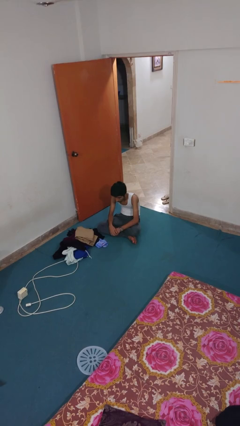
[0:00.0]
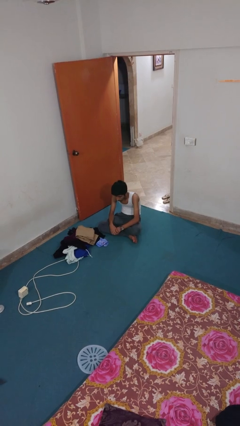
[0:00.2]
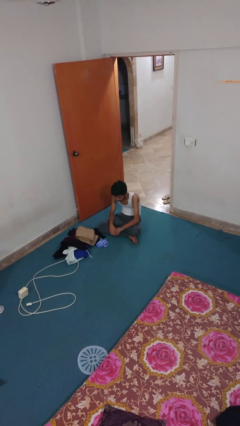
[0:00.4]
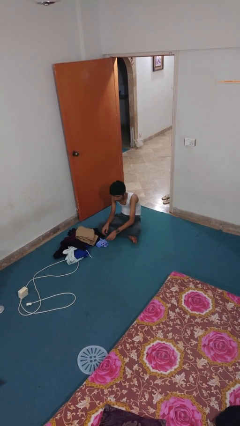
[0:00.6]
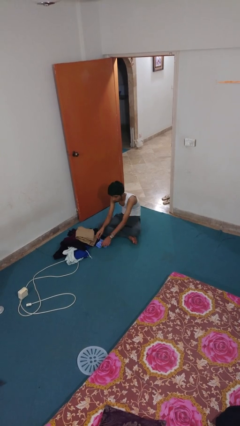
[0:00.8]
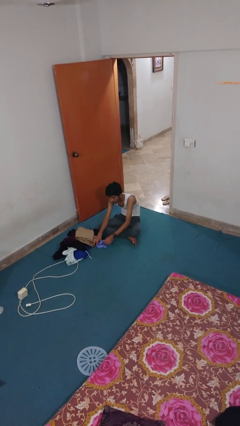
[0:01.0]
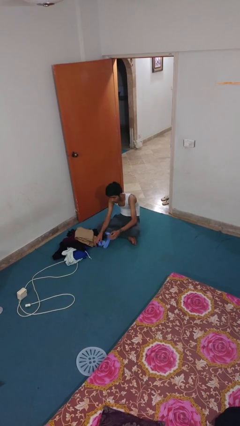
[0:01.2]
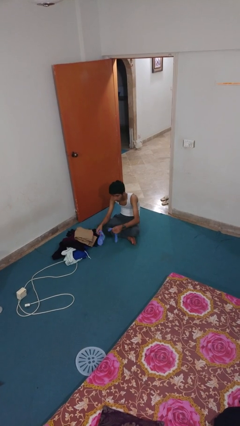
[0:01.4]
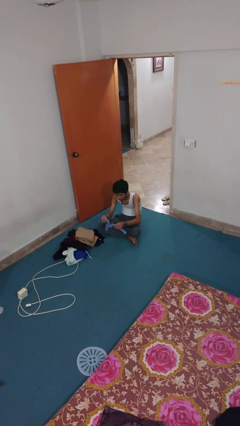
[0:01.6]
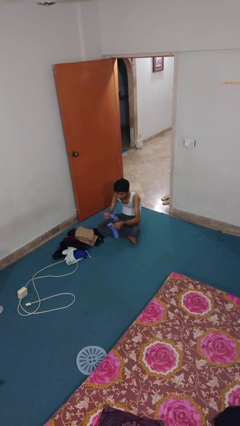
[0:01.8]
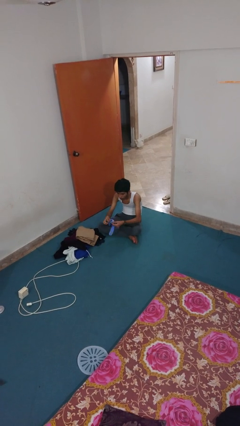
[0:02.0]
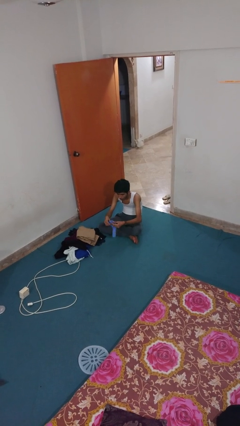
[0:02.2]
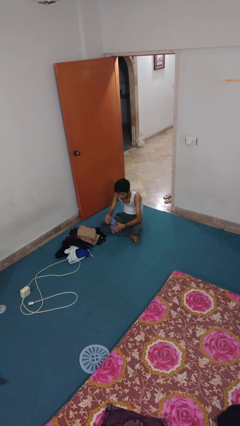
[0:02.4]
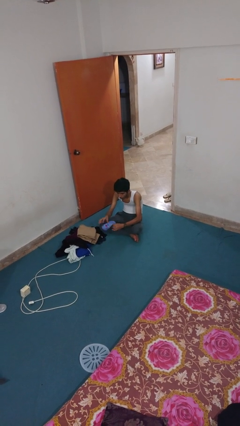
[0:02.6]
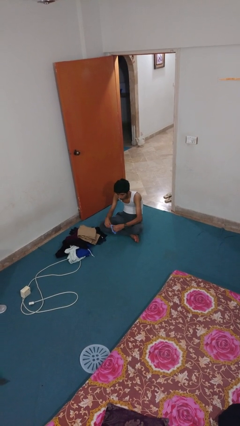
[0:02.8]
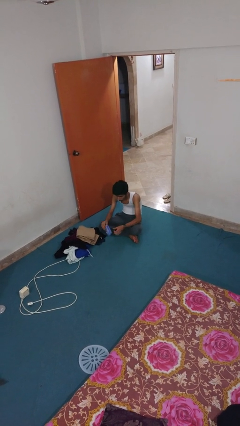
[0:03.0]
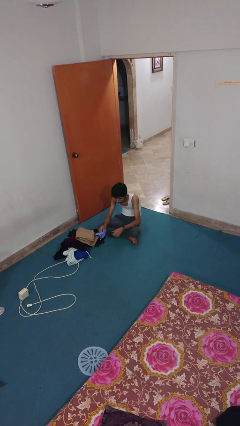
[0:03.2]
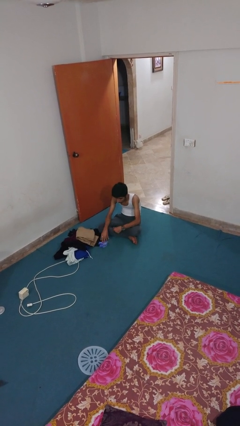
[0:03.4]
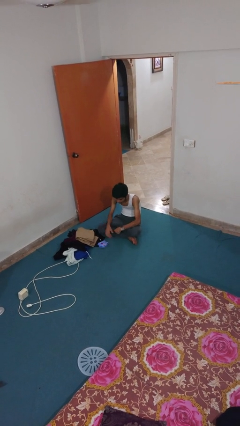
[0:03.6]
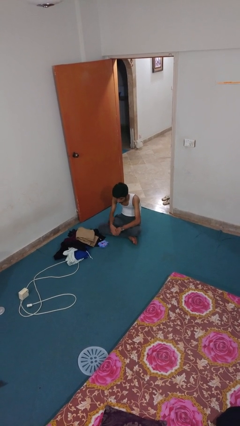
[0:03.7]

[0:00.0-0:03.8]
person folds socks

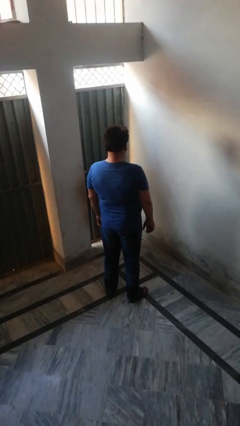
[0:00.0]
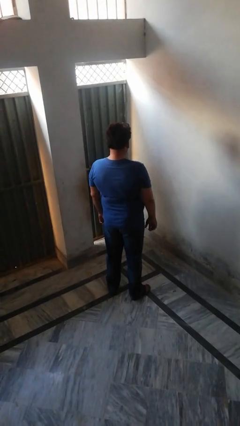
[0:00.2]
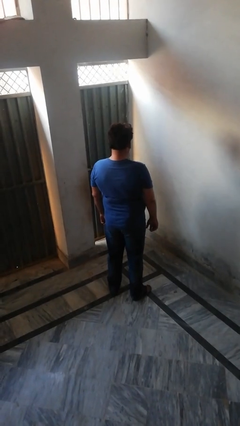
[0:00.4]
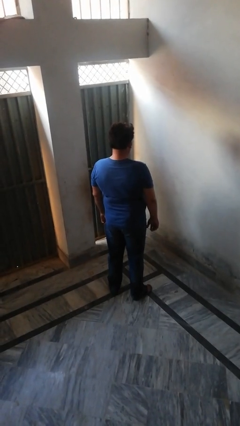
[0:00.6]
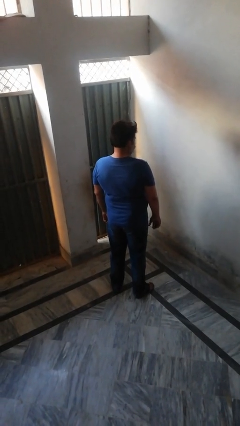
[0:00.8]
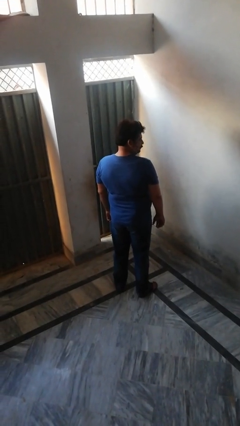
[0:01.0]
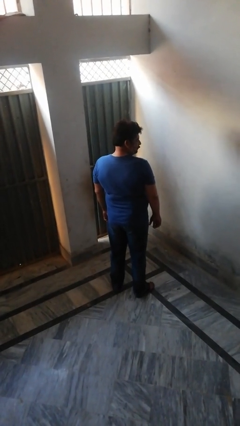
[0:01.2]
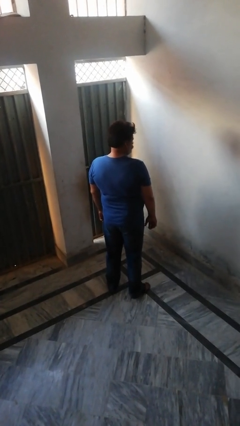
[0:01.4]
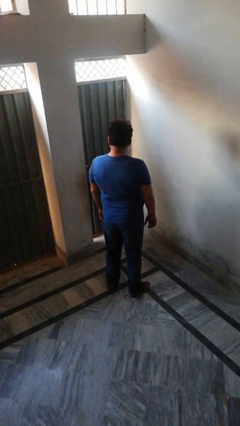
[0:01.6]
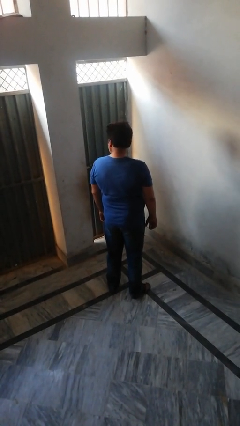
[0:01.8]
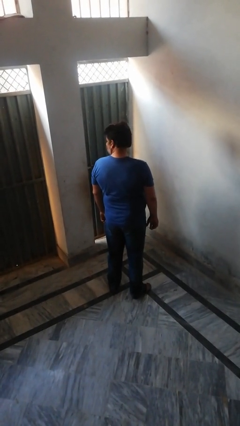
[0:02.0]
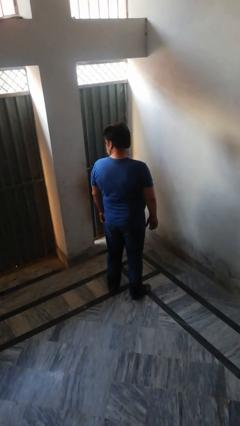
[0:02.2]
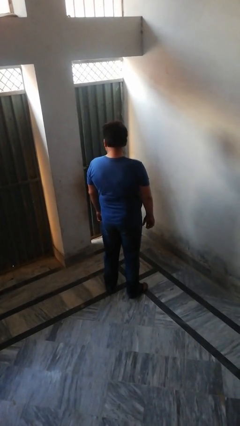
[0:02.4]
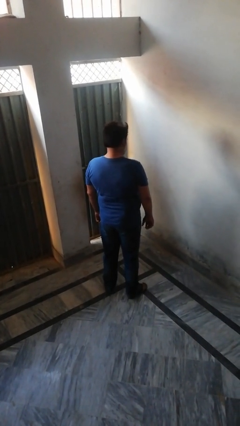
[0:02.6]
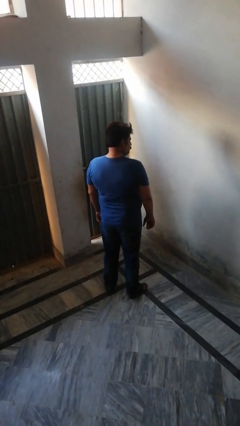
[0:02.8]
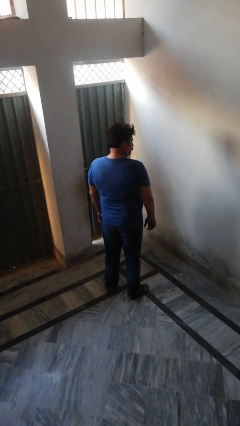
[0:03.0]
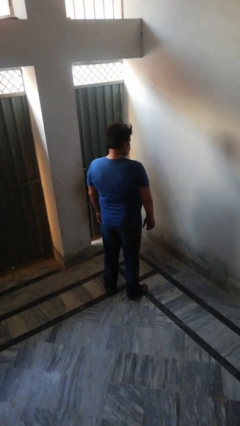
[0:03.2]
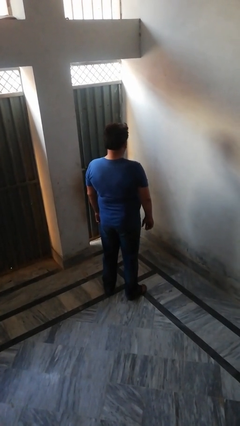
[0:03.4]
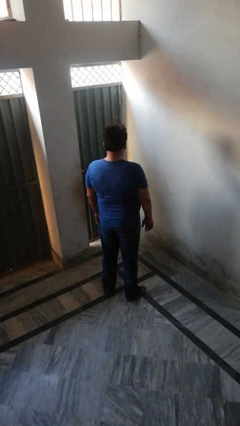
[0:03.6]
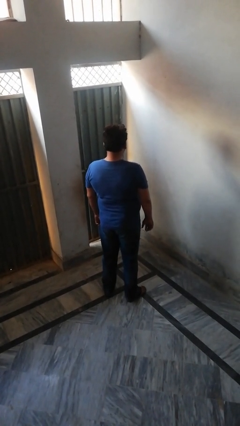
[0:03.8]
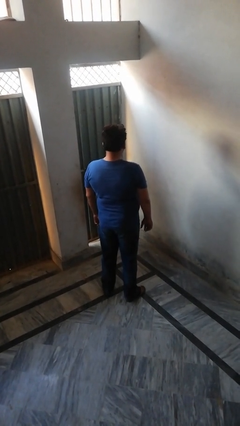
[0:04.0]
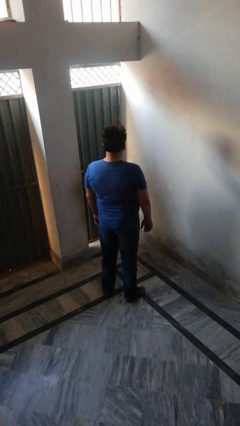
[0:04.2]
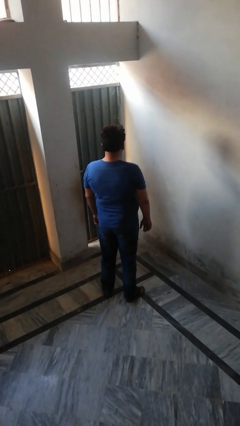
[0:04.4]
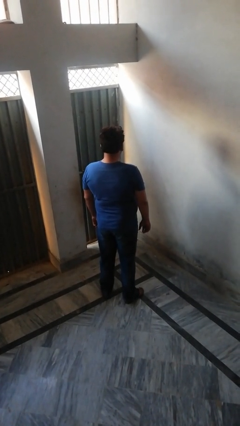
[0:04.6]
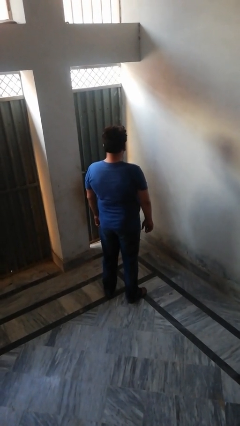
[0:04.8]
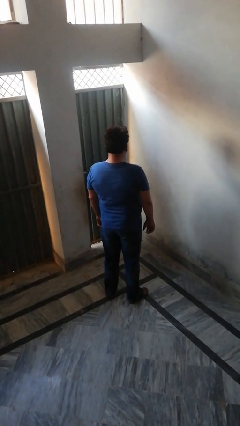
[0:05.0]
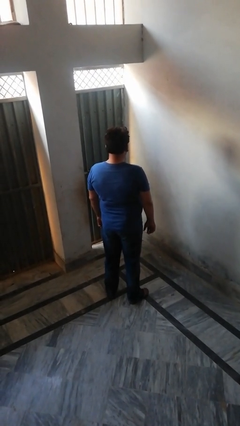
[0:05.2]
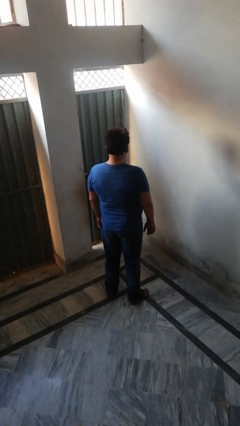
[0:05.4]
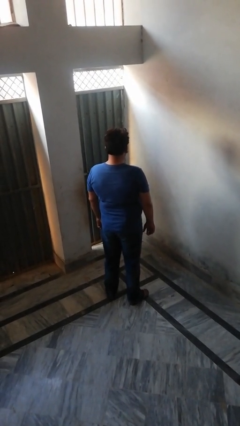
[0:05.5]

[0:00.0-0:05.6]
person shakes head

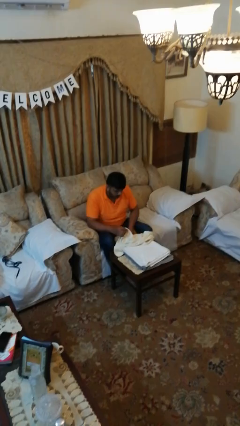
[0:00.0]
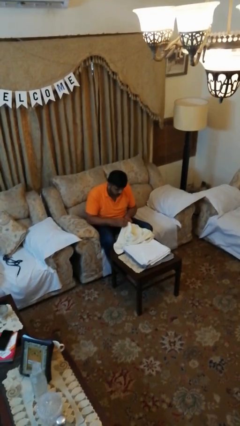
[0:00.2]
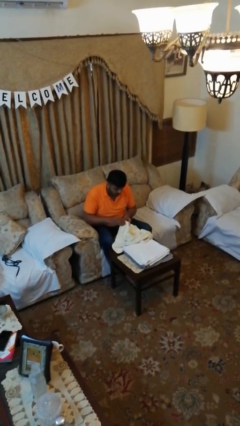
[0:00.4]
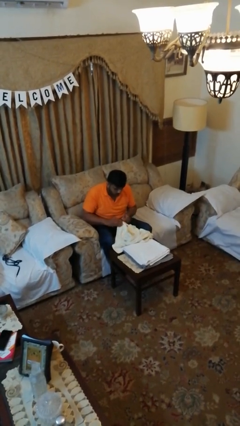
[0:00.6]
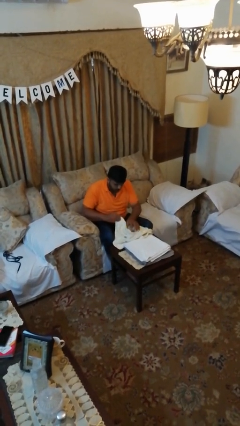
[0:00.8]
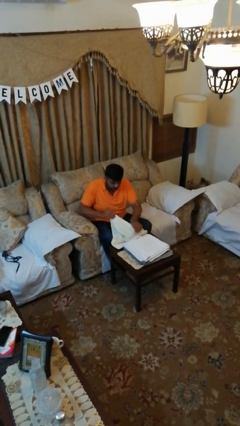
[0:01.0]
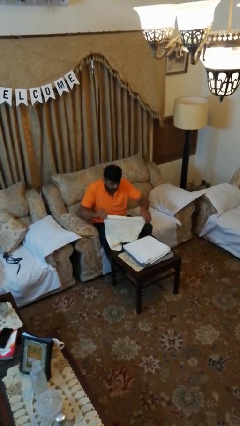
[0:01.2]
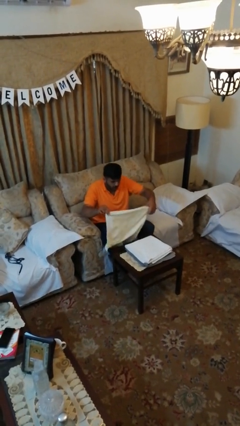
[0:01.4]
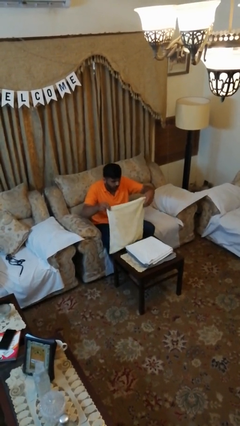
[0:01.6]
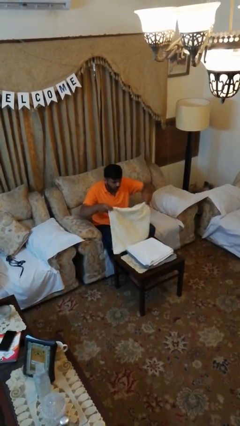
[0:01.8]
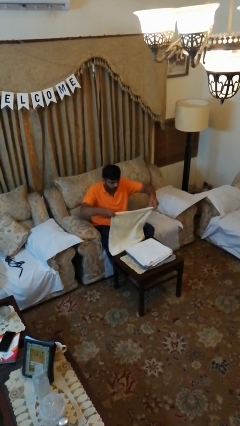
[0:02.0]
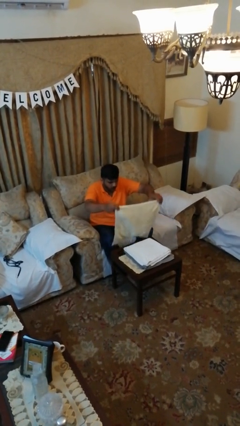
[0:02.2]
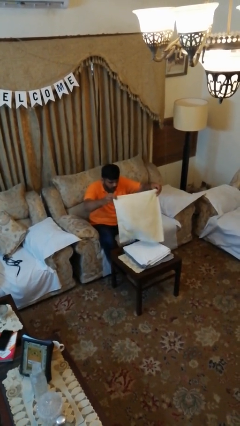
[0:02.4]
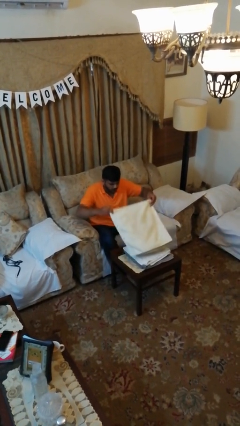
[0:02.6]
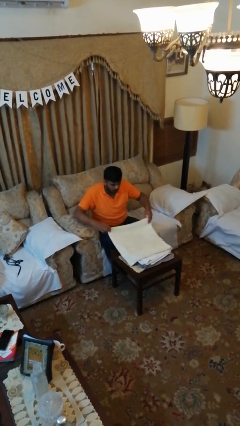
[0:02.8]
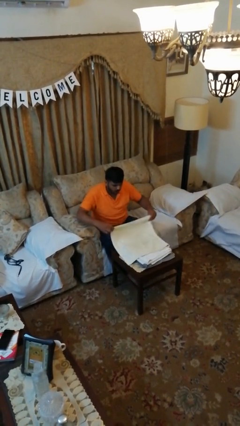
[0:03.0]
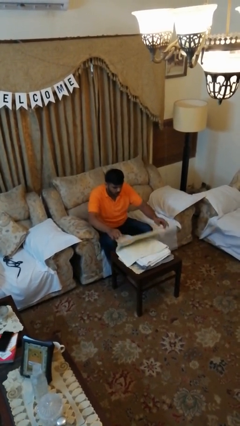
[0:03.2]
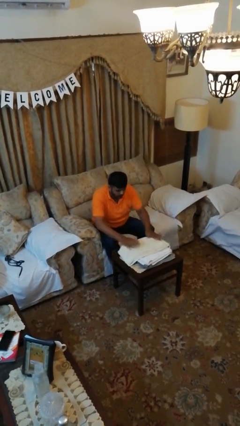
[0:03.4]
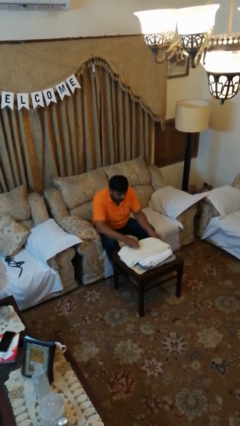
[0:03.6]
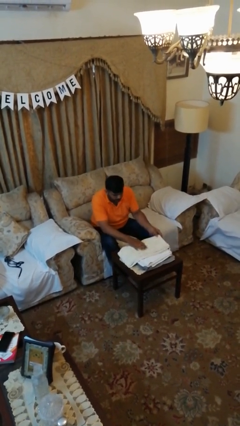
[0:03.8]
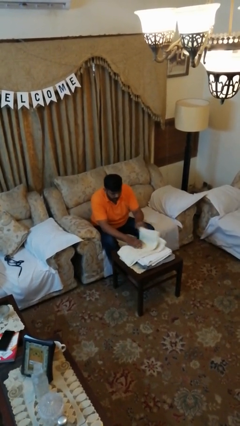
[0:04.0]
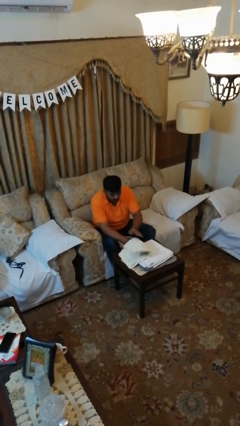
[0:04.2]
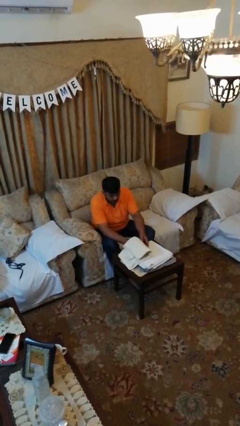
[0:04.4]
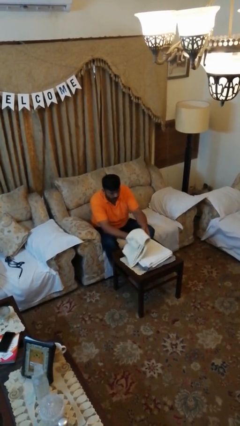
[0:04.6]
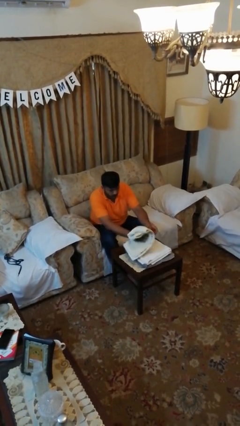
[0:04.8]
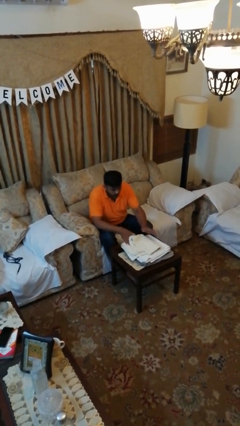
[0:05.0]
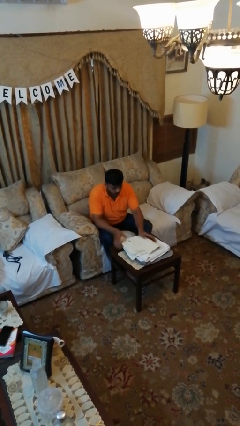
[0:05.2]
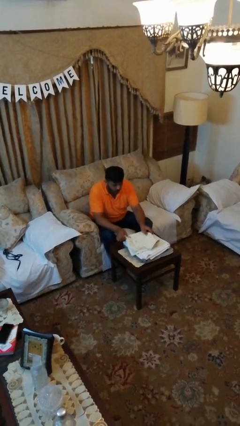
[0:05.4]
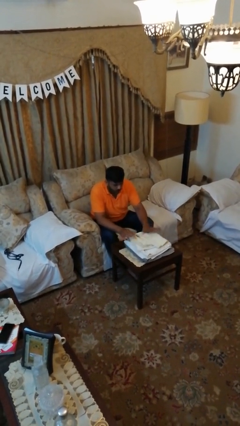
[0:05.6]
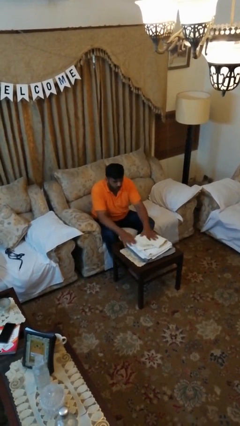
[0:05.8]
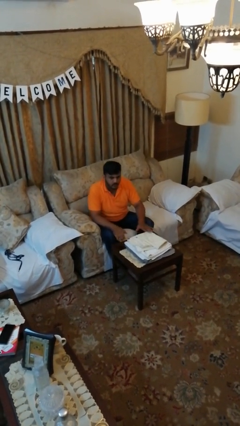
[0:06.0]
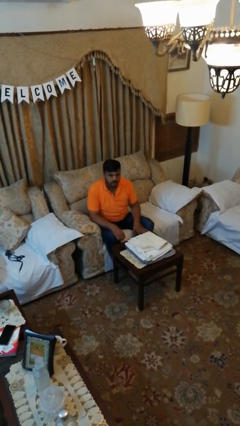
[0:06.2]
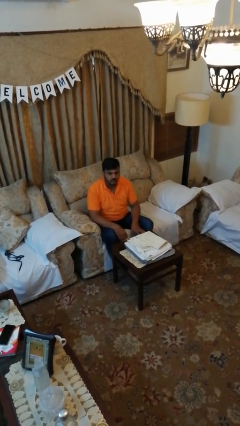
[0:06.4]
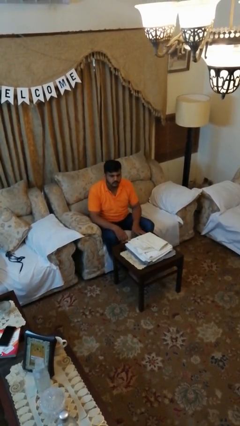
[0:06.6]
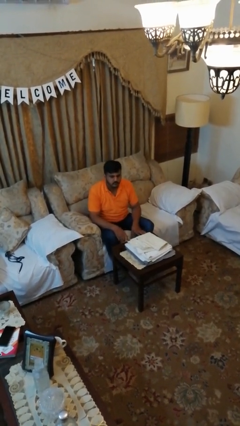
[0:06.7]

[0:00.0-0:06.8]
person folds towel

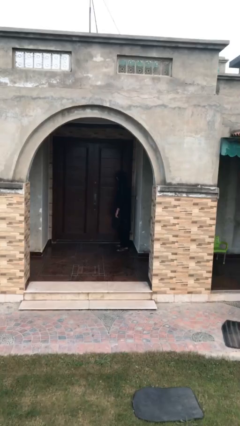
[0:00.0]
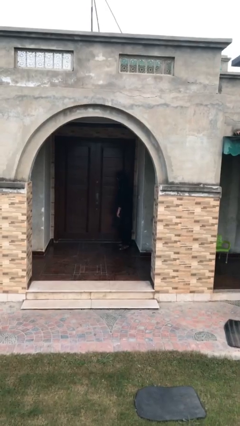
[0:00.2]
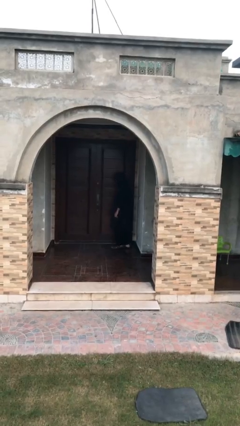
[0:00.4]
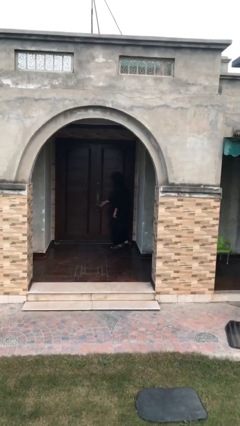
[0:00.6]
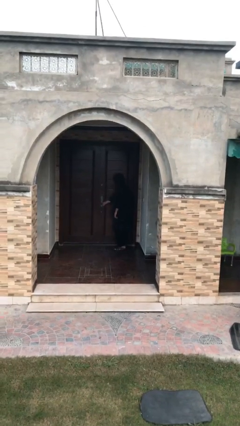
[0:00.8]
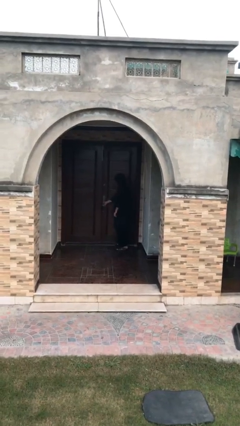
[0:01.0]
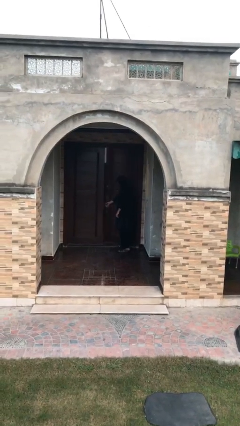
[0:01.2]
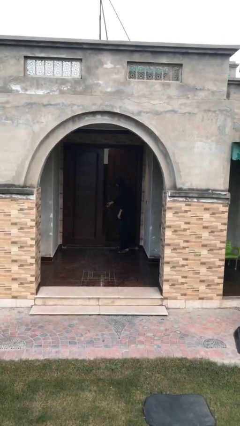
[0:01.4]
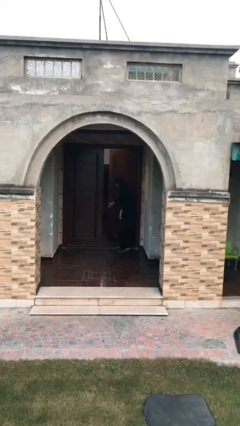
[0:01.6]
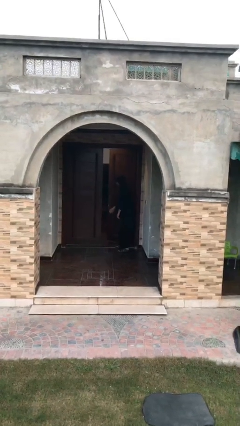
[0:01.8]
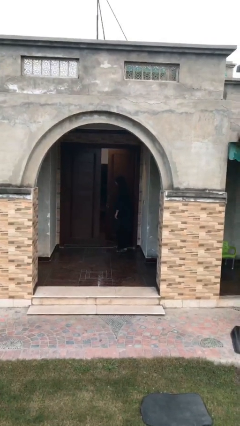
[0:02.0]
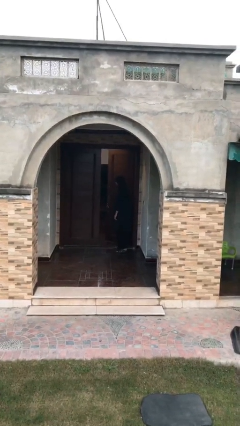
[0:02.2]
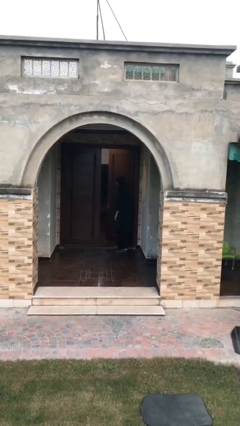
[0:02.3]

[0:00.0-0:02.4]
person opens facility door
